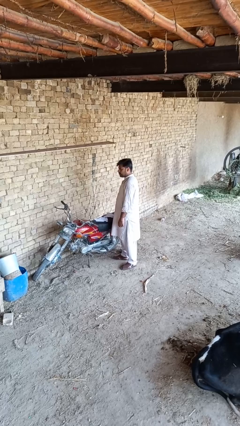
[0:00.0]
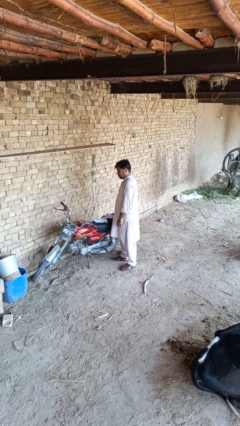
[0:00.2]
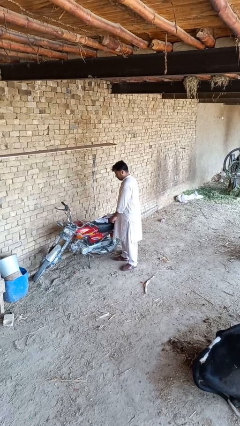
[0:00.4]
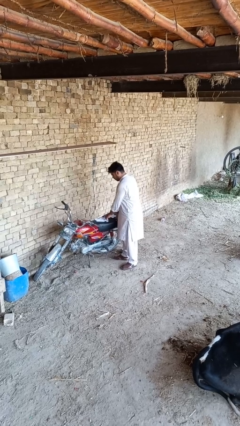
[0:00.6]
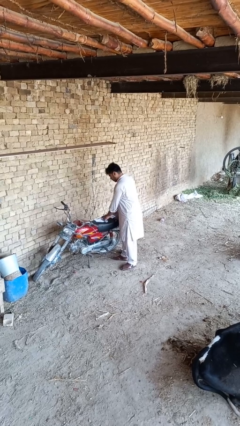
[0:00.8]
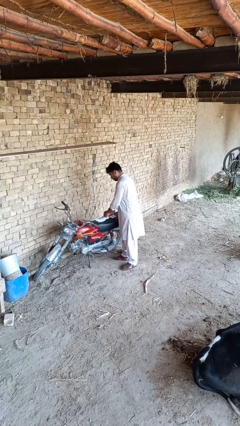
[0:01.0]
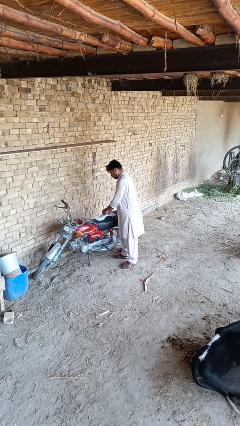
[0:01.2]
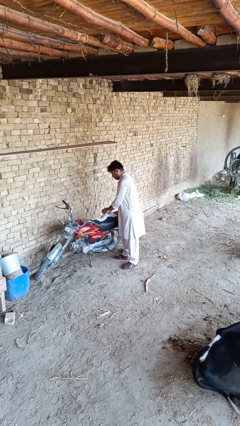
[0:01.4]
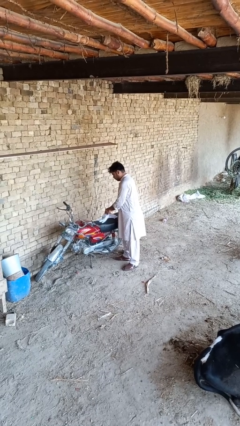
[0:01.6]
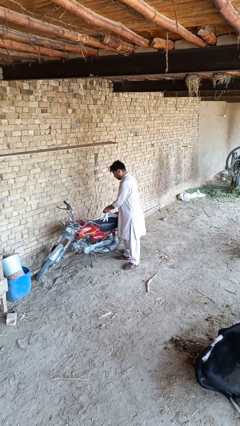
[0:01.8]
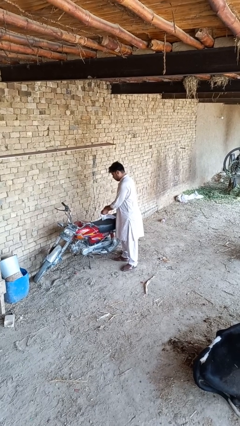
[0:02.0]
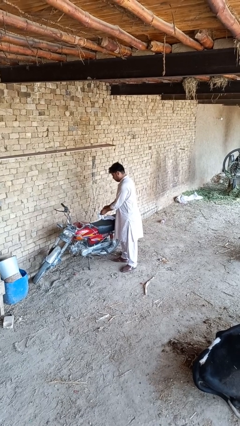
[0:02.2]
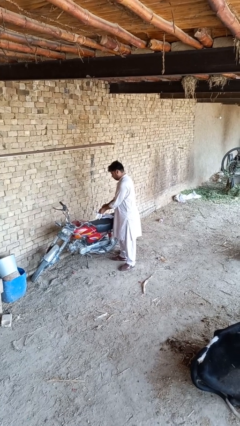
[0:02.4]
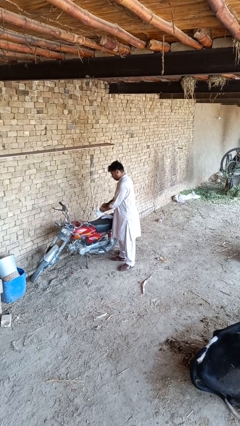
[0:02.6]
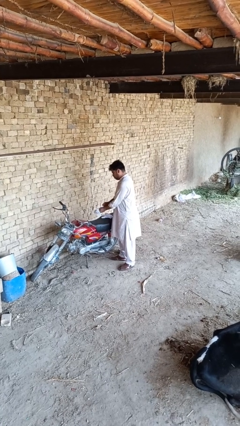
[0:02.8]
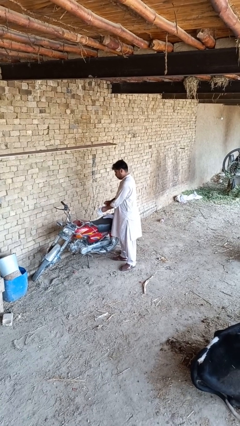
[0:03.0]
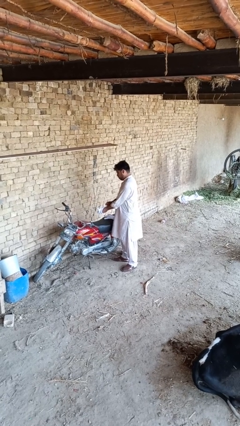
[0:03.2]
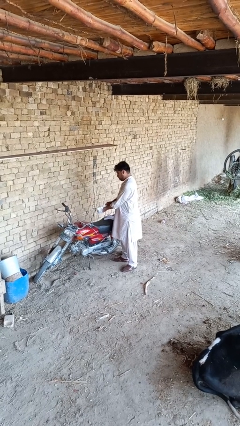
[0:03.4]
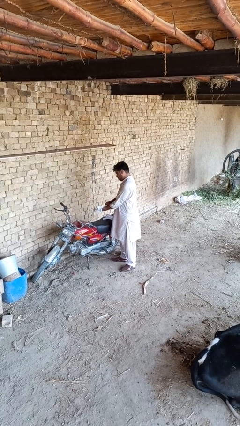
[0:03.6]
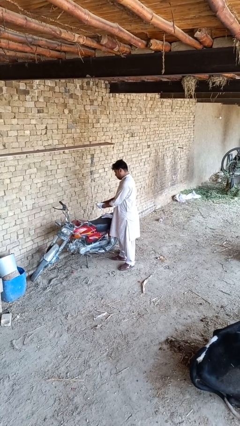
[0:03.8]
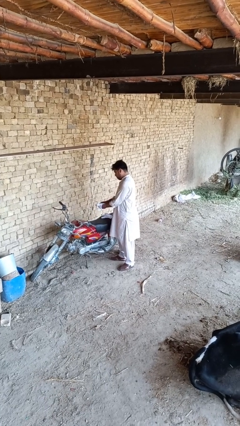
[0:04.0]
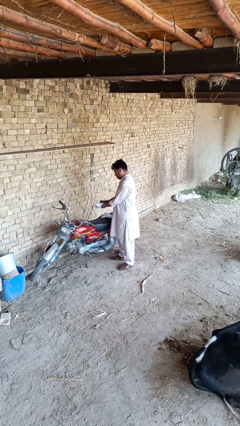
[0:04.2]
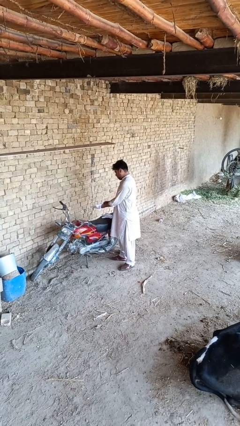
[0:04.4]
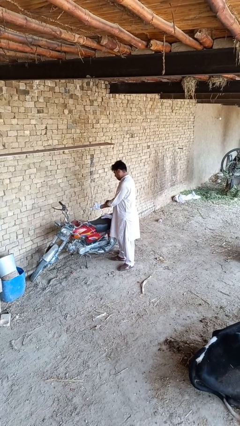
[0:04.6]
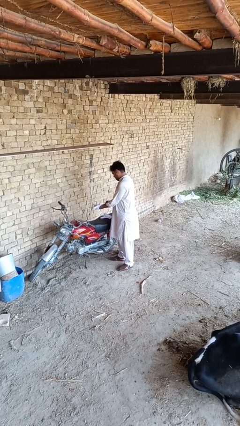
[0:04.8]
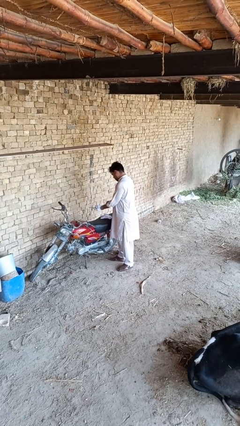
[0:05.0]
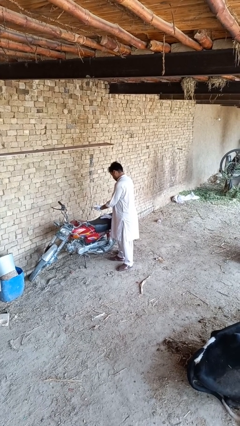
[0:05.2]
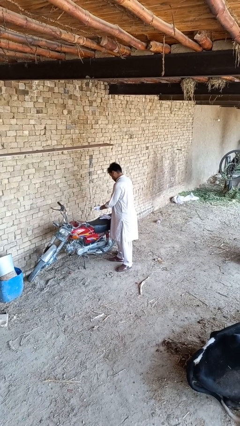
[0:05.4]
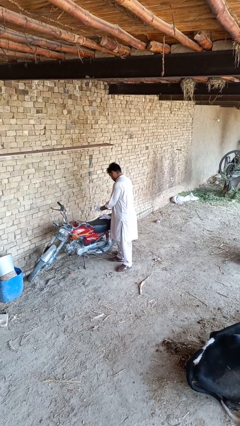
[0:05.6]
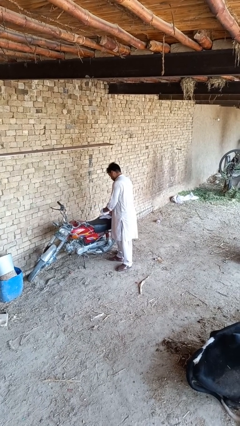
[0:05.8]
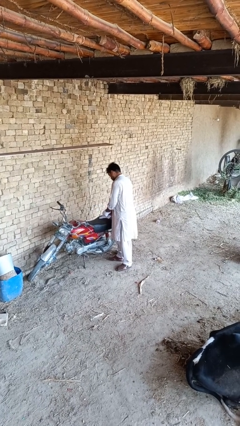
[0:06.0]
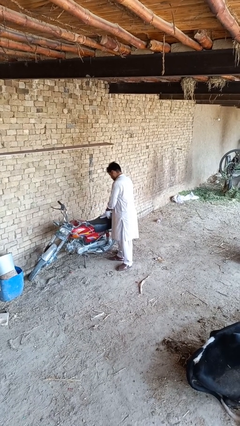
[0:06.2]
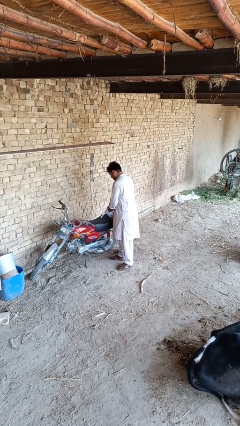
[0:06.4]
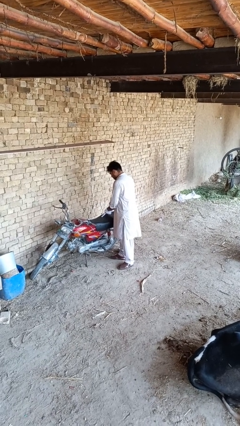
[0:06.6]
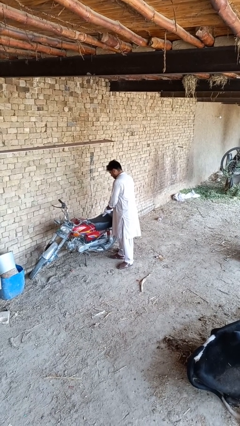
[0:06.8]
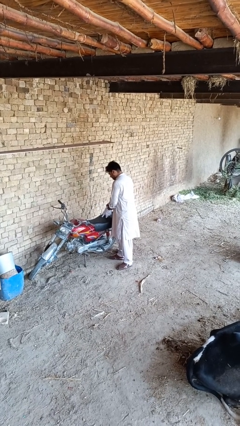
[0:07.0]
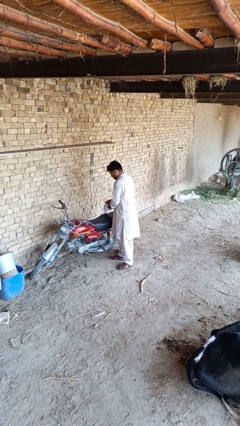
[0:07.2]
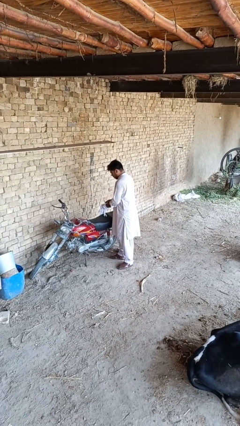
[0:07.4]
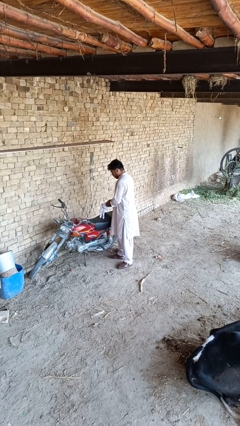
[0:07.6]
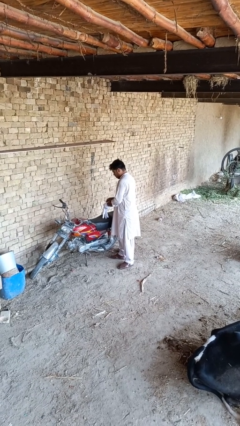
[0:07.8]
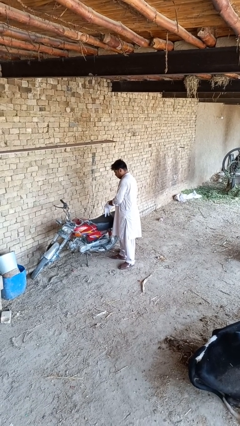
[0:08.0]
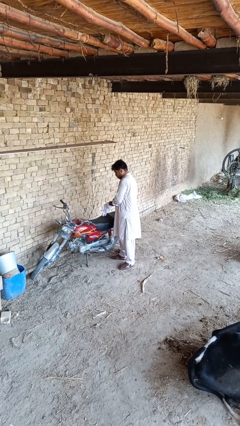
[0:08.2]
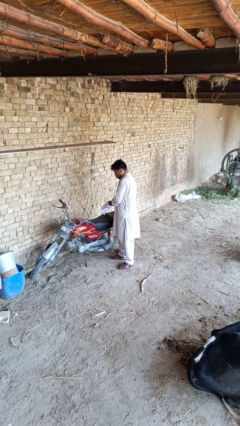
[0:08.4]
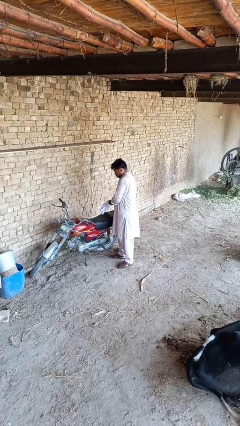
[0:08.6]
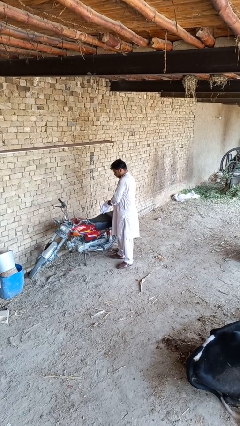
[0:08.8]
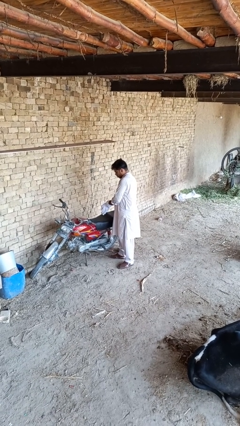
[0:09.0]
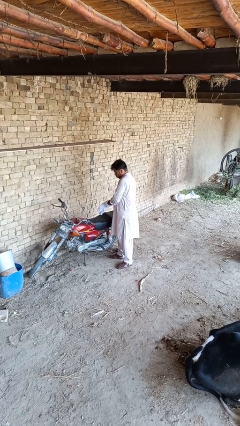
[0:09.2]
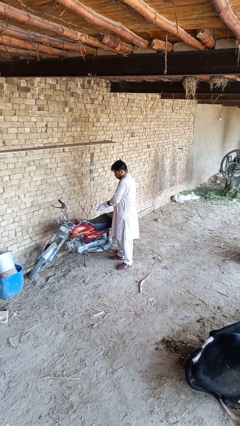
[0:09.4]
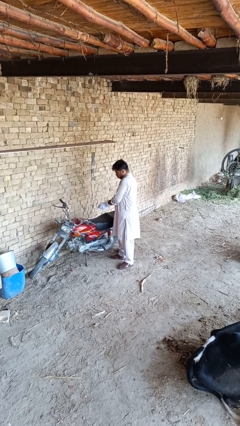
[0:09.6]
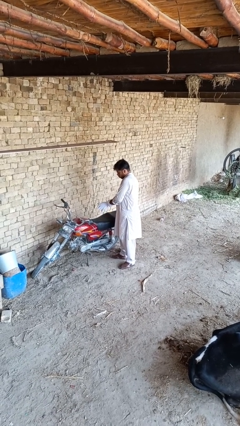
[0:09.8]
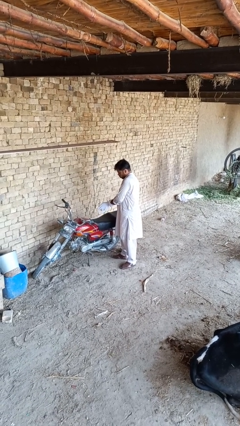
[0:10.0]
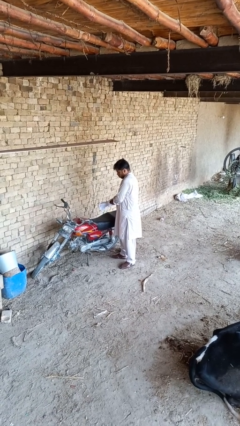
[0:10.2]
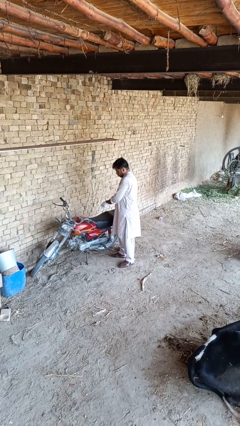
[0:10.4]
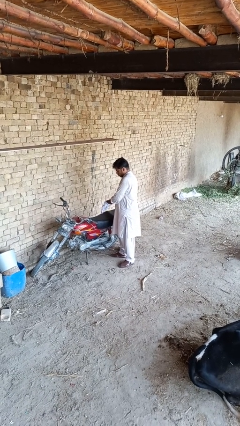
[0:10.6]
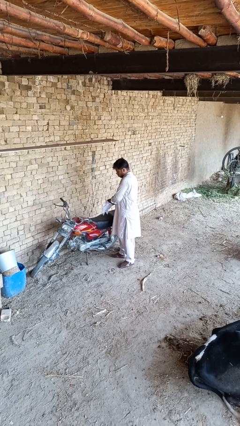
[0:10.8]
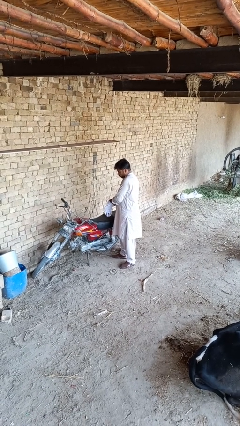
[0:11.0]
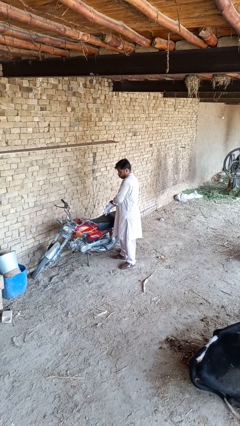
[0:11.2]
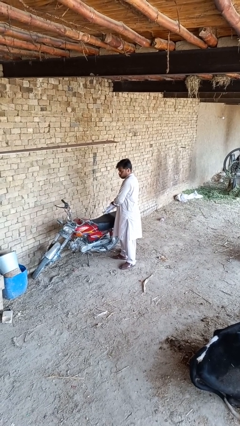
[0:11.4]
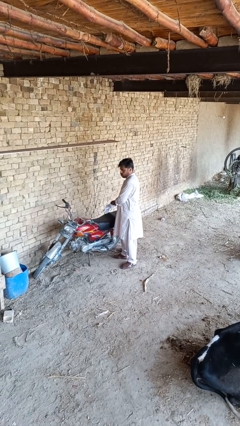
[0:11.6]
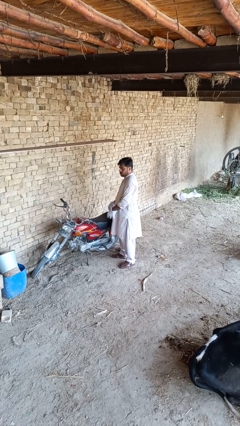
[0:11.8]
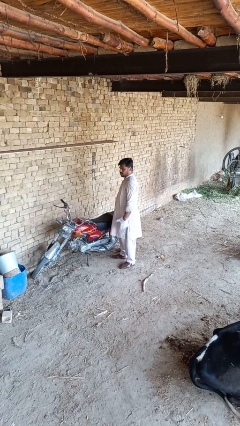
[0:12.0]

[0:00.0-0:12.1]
person puts on gloves

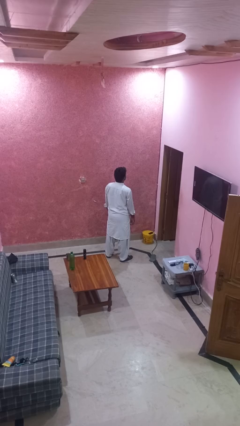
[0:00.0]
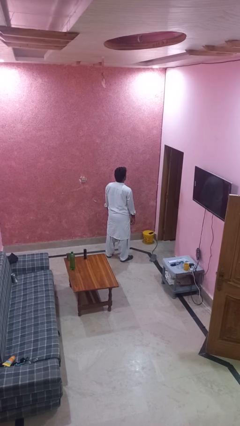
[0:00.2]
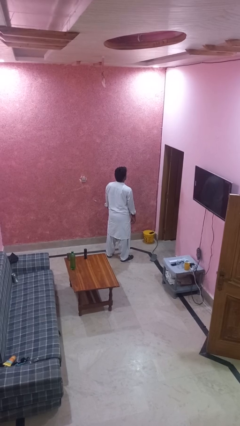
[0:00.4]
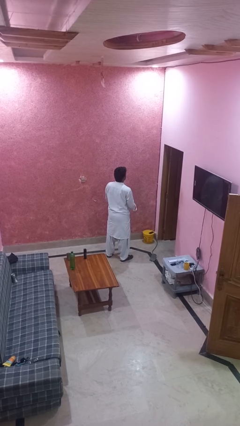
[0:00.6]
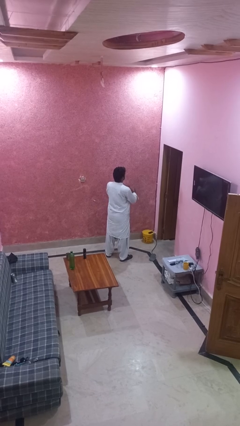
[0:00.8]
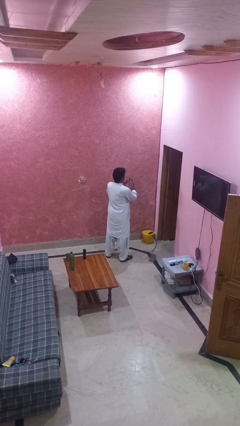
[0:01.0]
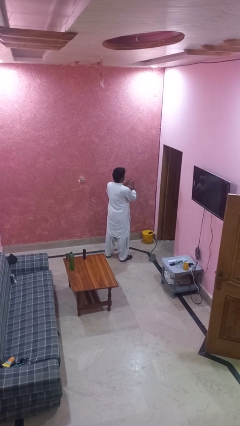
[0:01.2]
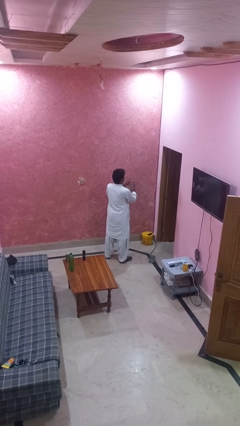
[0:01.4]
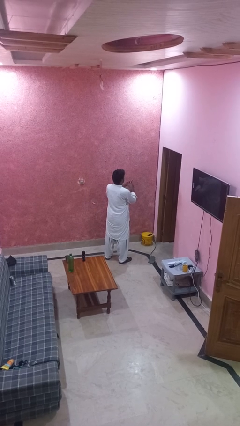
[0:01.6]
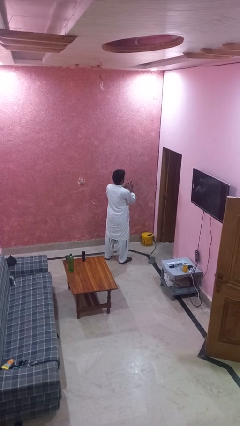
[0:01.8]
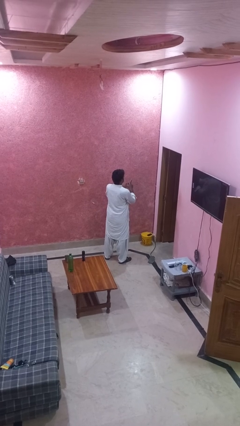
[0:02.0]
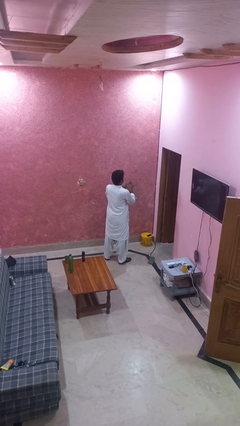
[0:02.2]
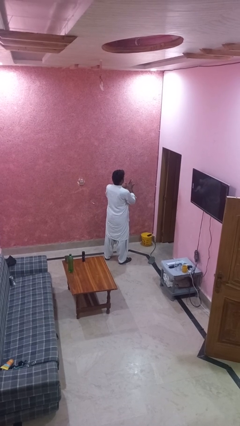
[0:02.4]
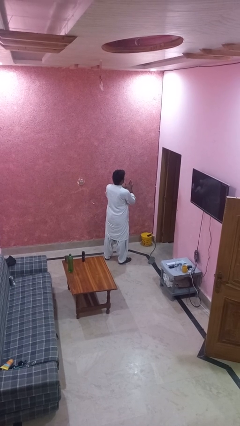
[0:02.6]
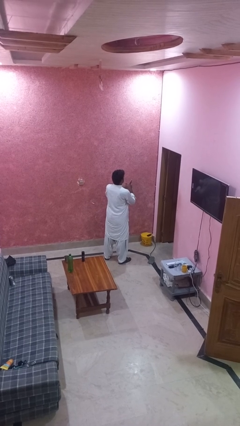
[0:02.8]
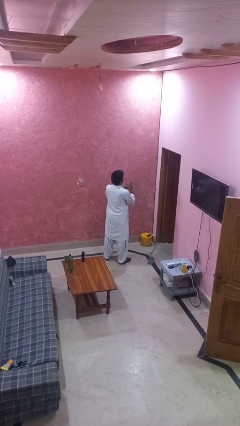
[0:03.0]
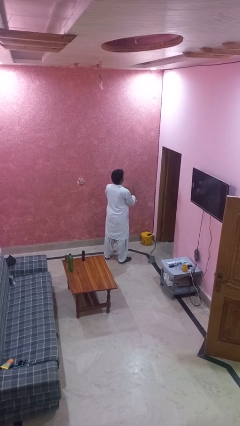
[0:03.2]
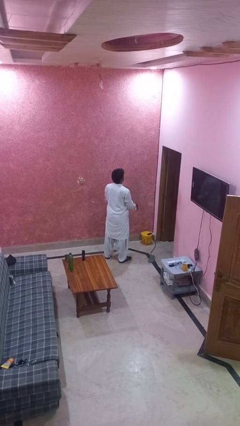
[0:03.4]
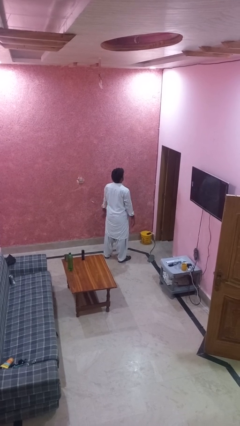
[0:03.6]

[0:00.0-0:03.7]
person snaps fingers

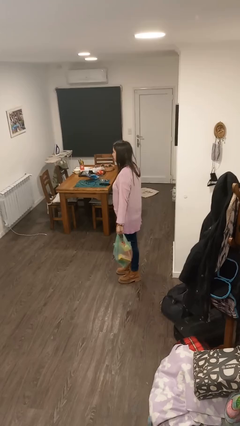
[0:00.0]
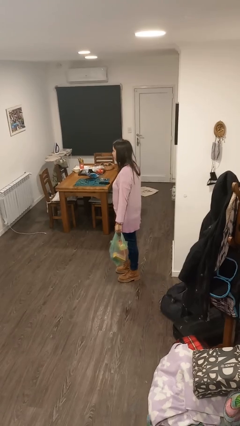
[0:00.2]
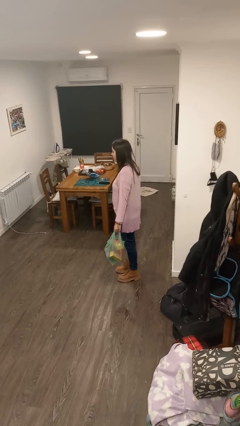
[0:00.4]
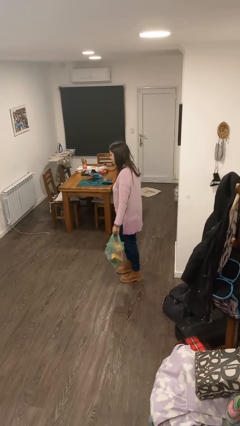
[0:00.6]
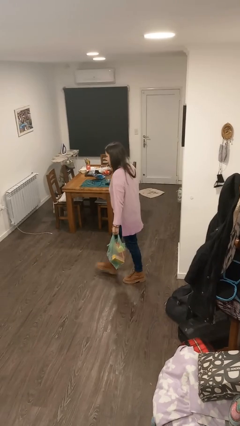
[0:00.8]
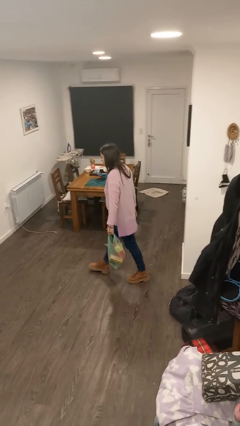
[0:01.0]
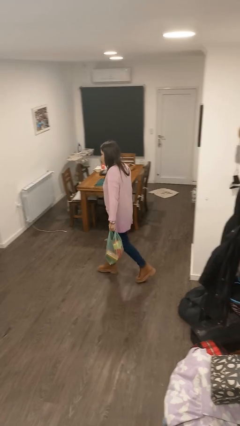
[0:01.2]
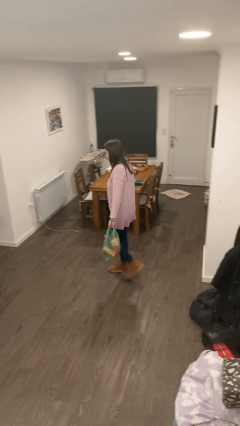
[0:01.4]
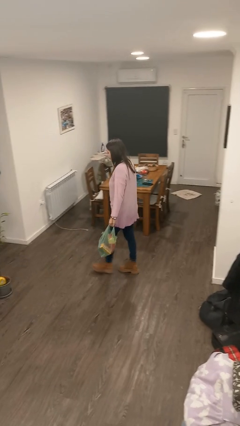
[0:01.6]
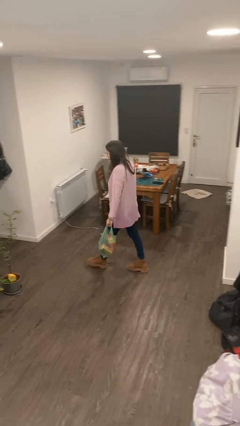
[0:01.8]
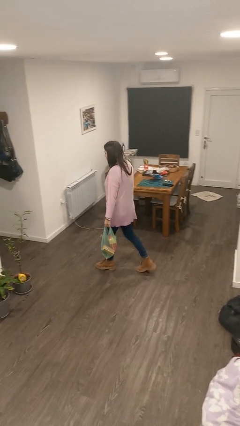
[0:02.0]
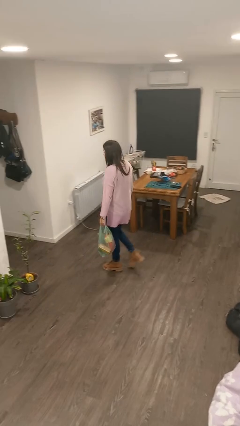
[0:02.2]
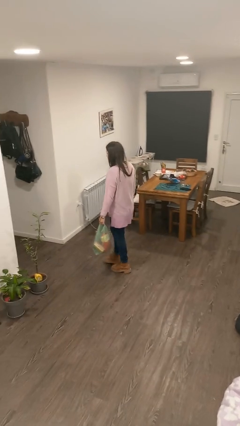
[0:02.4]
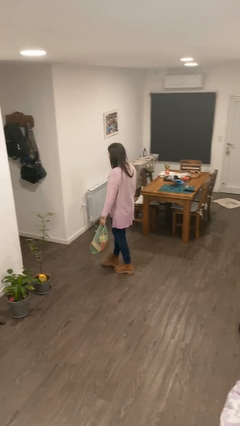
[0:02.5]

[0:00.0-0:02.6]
person carries groceries
